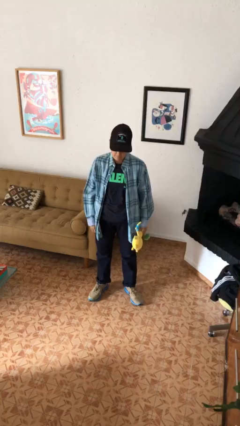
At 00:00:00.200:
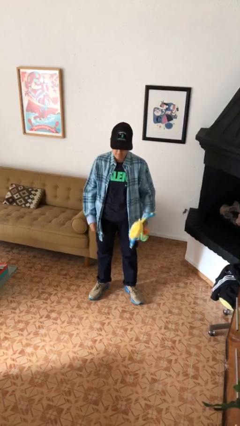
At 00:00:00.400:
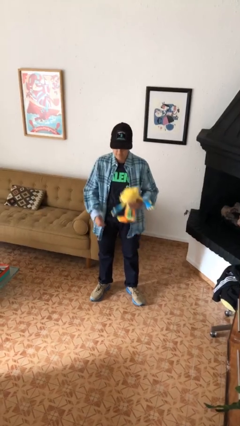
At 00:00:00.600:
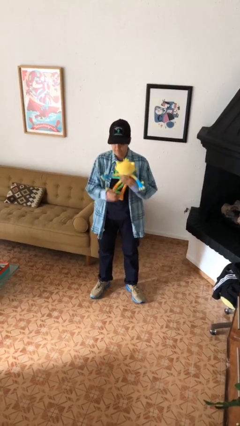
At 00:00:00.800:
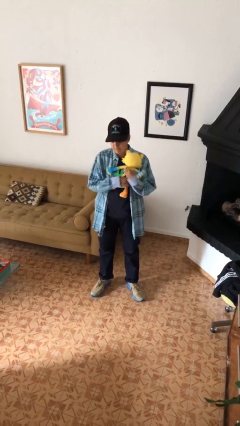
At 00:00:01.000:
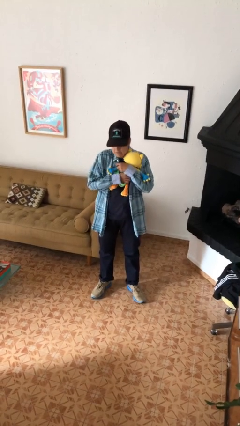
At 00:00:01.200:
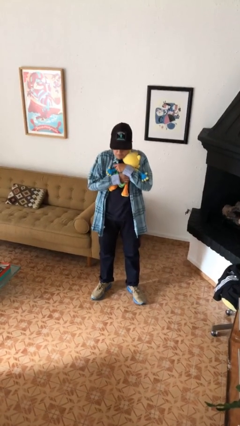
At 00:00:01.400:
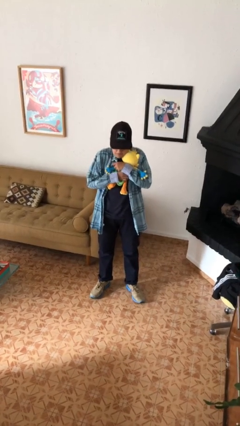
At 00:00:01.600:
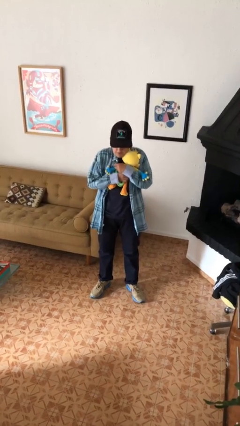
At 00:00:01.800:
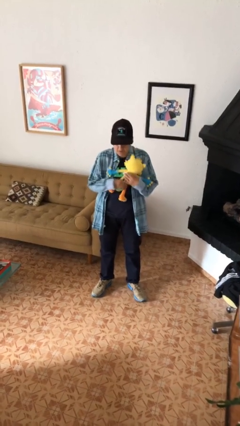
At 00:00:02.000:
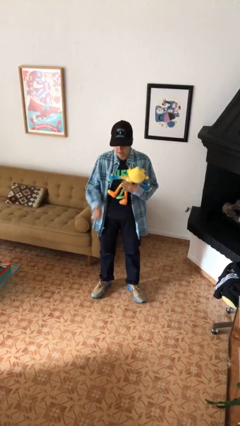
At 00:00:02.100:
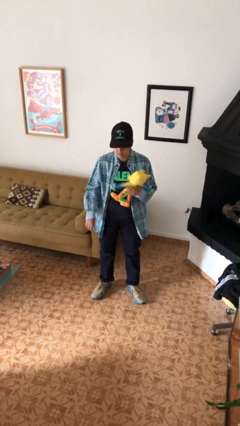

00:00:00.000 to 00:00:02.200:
person hugs stuffed animal

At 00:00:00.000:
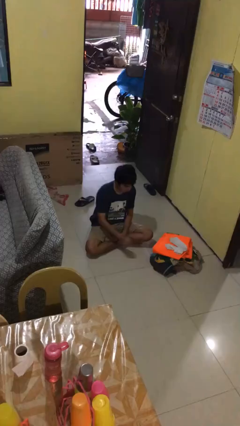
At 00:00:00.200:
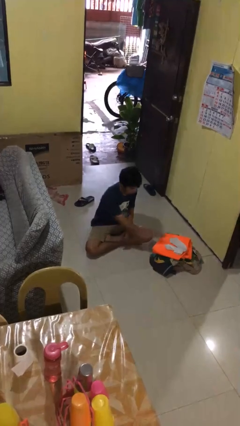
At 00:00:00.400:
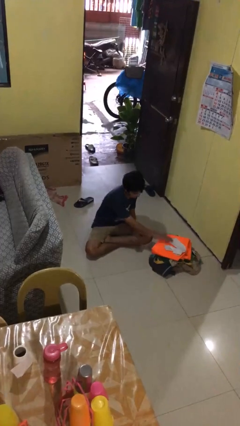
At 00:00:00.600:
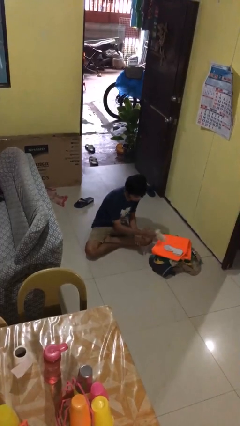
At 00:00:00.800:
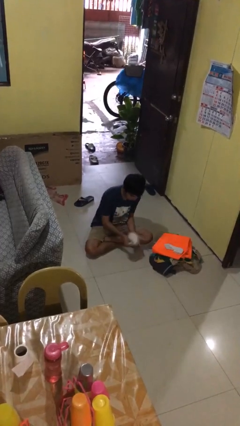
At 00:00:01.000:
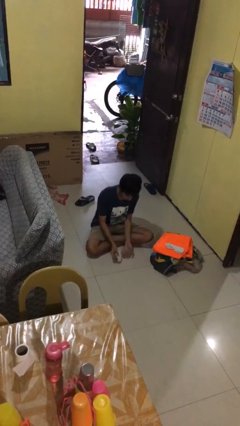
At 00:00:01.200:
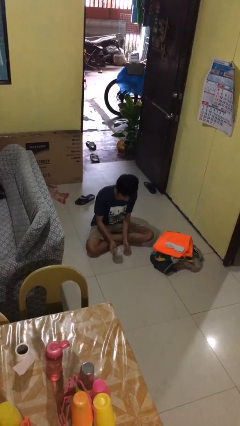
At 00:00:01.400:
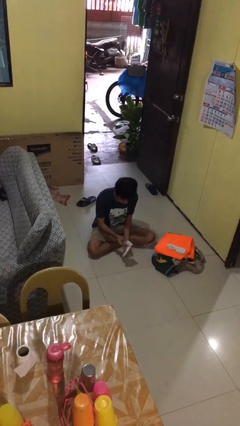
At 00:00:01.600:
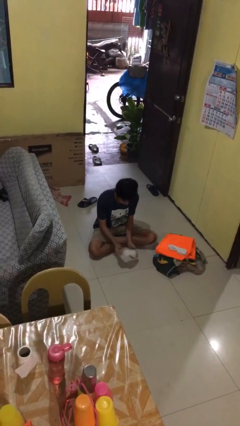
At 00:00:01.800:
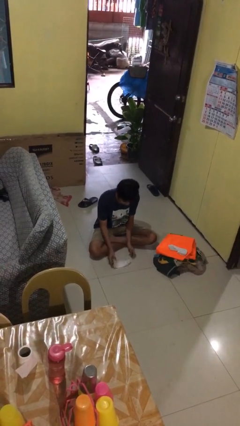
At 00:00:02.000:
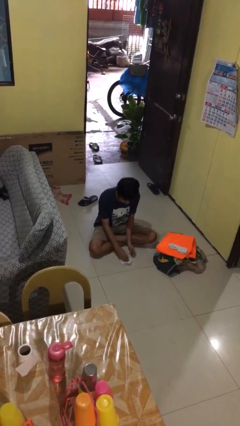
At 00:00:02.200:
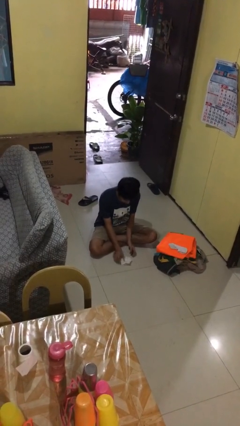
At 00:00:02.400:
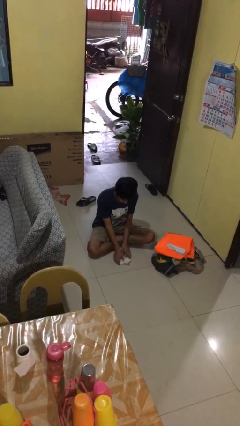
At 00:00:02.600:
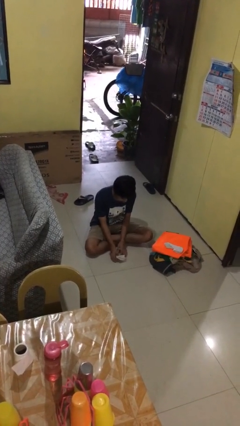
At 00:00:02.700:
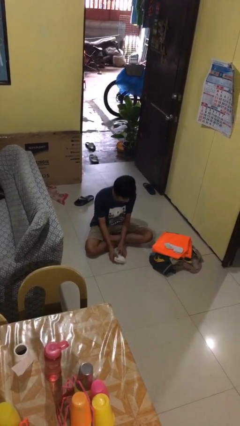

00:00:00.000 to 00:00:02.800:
person folds socks

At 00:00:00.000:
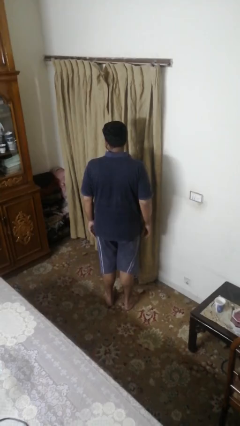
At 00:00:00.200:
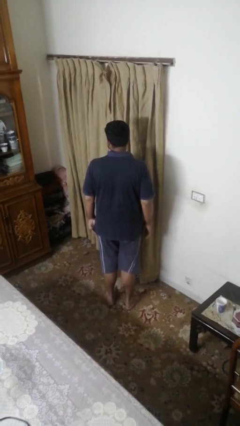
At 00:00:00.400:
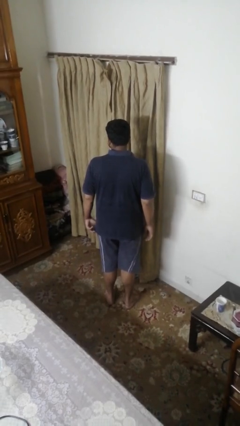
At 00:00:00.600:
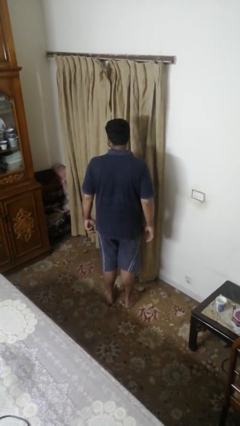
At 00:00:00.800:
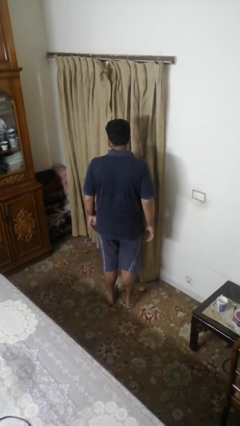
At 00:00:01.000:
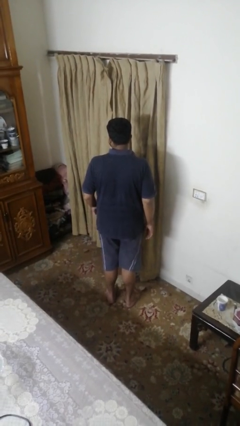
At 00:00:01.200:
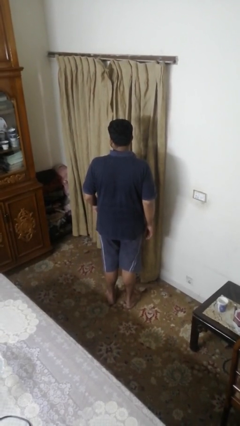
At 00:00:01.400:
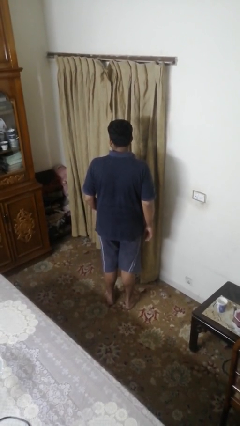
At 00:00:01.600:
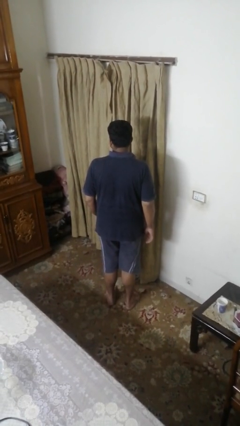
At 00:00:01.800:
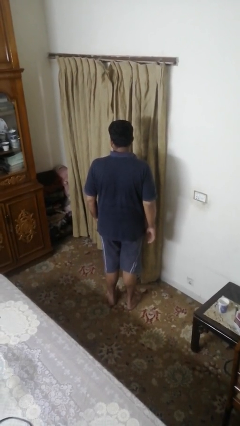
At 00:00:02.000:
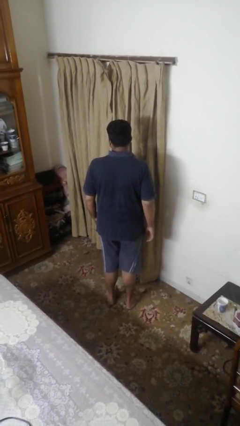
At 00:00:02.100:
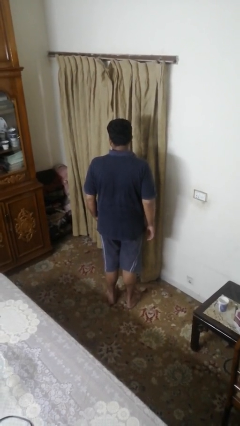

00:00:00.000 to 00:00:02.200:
person gestures listen closely

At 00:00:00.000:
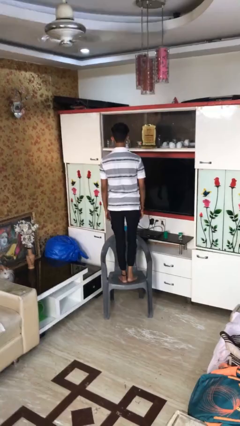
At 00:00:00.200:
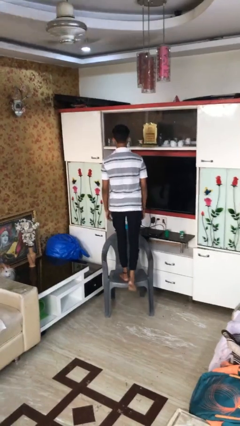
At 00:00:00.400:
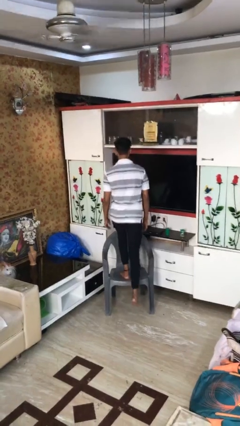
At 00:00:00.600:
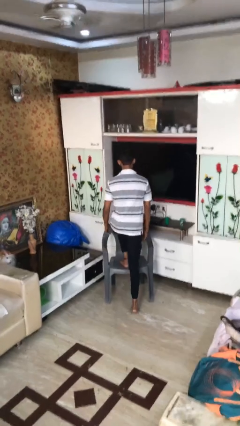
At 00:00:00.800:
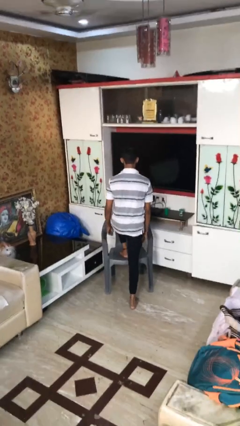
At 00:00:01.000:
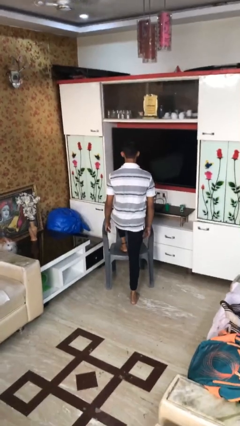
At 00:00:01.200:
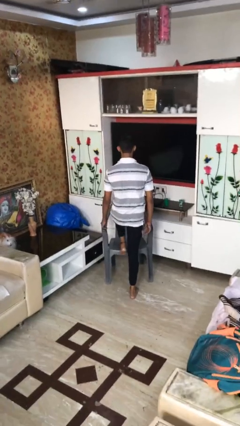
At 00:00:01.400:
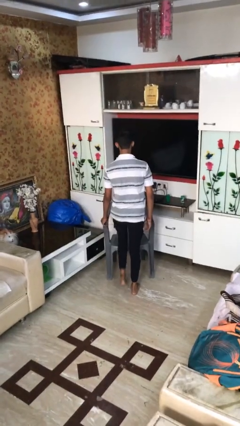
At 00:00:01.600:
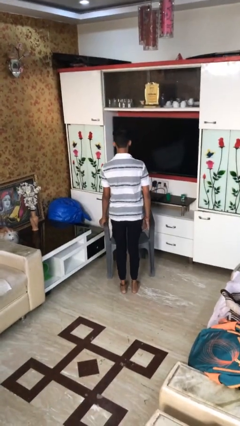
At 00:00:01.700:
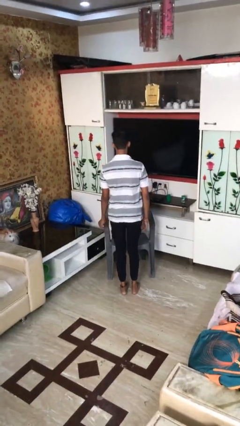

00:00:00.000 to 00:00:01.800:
person climbs off chair

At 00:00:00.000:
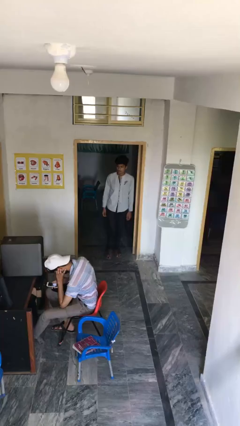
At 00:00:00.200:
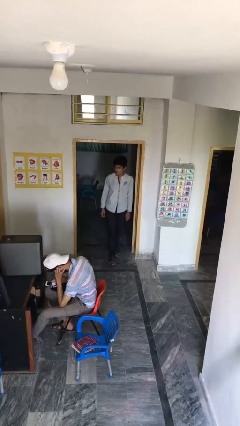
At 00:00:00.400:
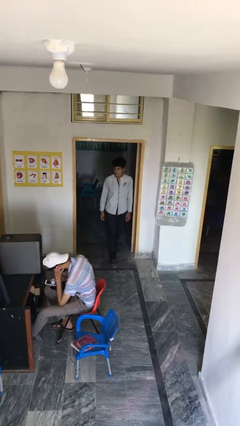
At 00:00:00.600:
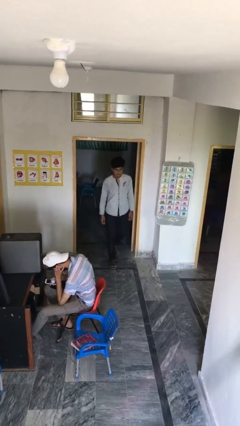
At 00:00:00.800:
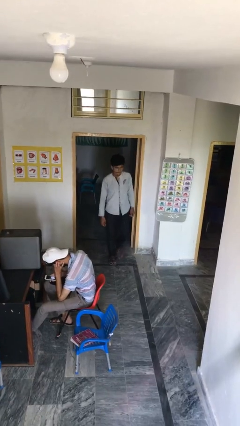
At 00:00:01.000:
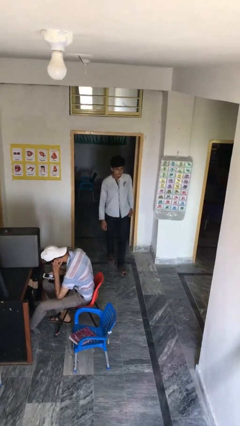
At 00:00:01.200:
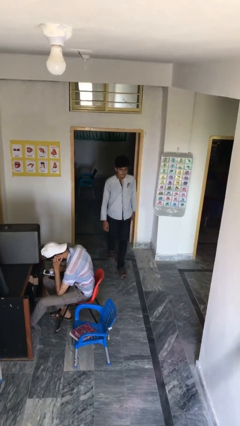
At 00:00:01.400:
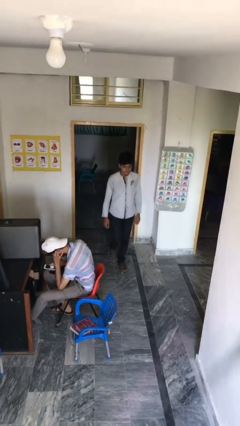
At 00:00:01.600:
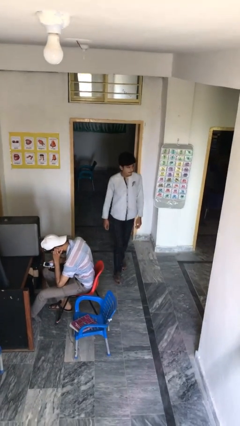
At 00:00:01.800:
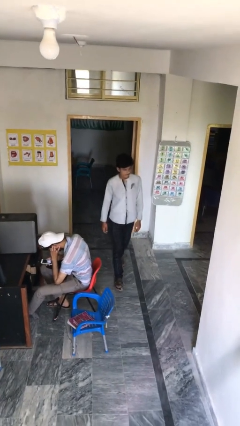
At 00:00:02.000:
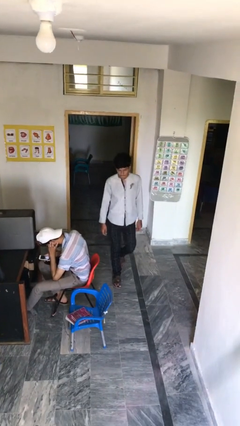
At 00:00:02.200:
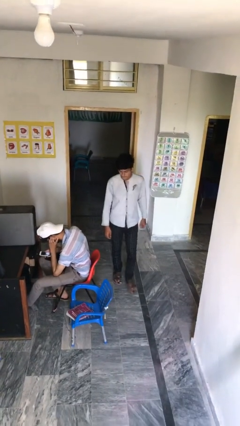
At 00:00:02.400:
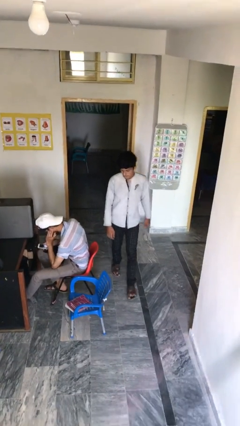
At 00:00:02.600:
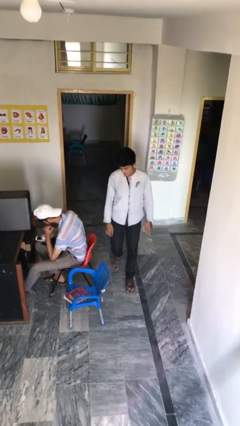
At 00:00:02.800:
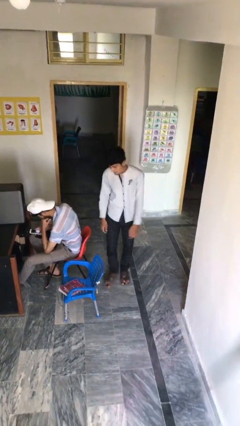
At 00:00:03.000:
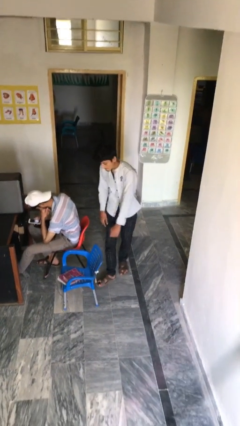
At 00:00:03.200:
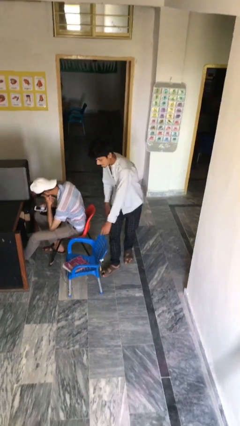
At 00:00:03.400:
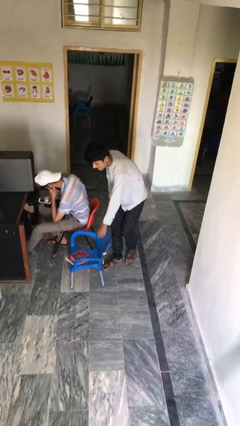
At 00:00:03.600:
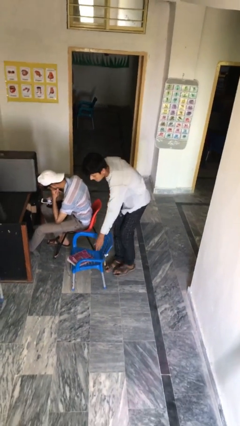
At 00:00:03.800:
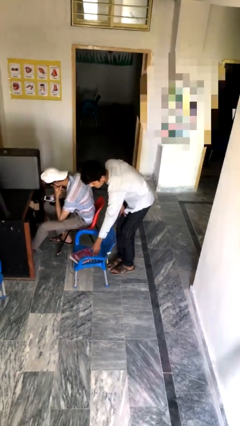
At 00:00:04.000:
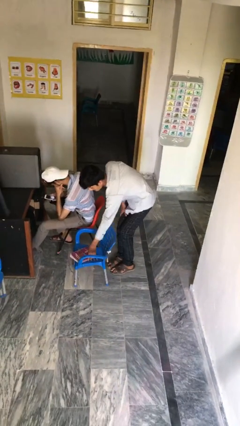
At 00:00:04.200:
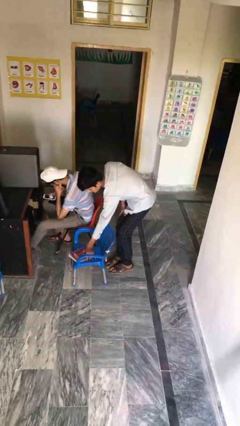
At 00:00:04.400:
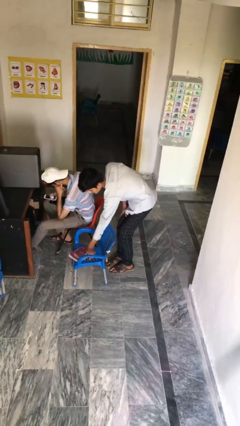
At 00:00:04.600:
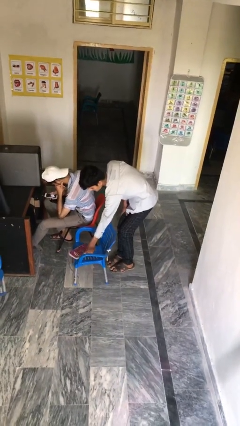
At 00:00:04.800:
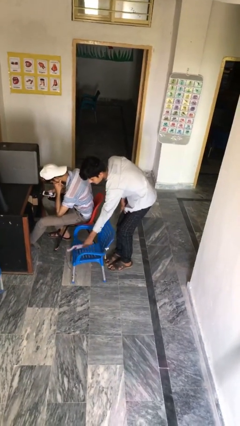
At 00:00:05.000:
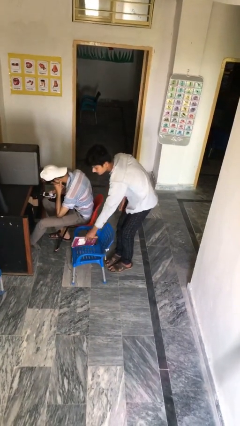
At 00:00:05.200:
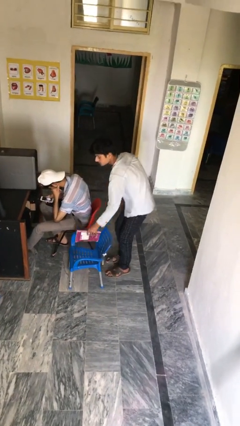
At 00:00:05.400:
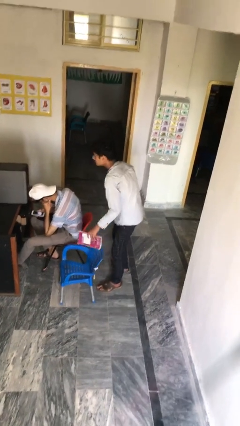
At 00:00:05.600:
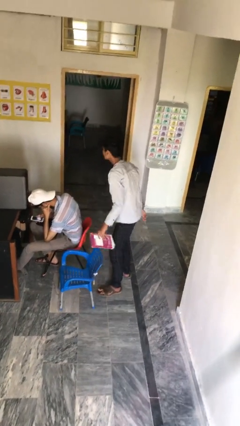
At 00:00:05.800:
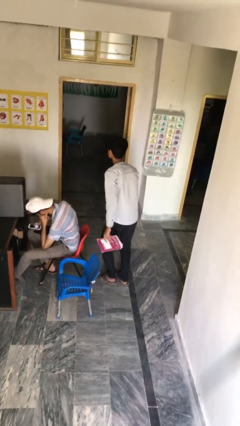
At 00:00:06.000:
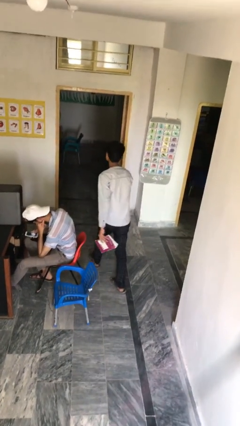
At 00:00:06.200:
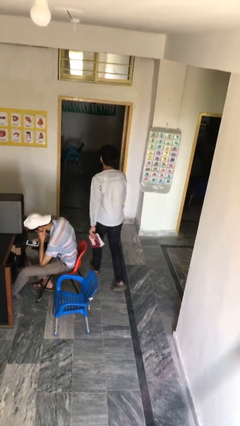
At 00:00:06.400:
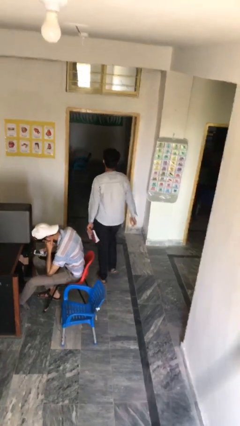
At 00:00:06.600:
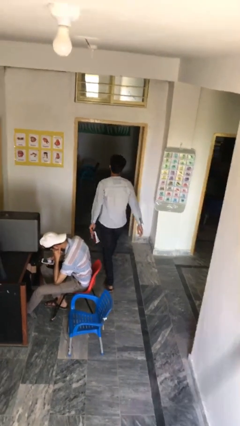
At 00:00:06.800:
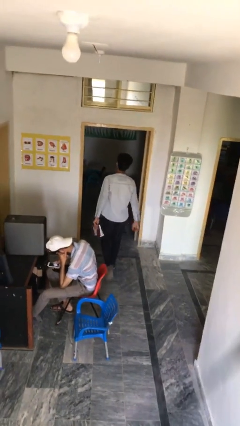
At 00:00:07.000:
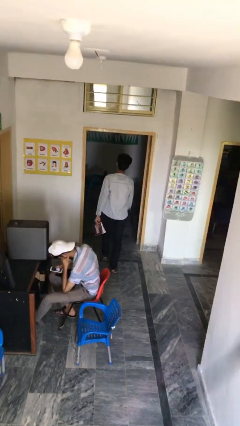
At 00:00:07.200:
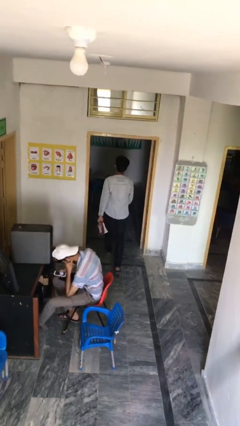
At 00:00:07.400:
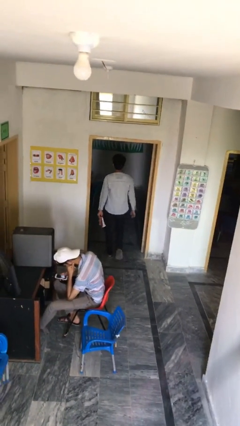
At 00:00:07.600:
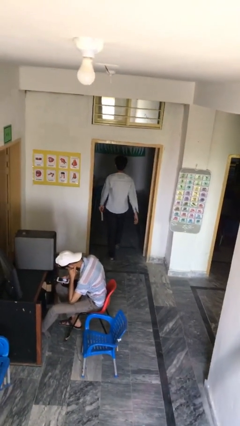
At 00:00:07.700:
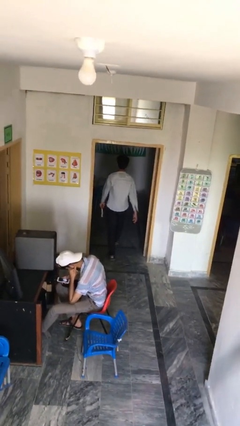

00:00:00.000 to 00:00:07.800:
person steals object from person

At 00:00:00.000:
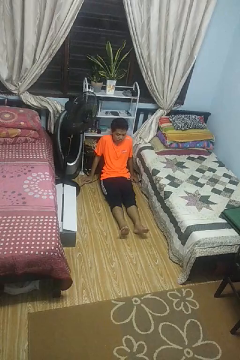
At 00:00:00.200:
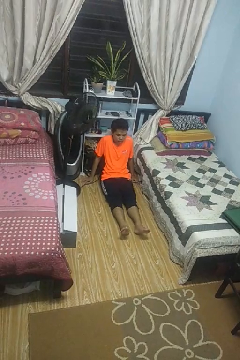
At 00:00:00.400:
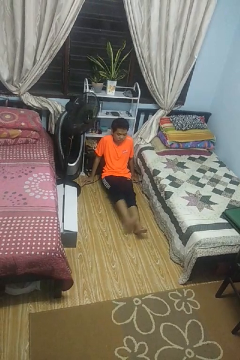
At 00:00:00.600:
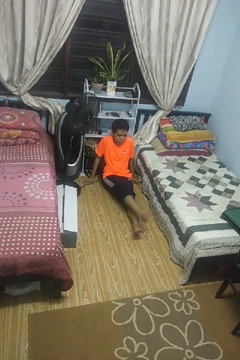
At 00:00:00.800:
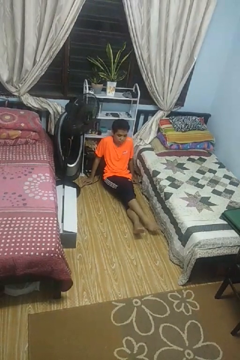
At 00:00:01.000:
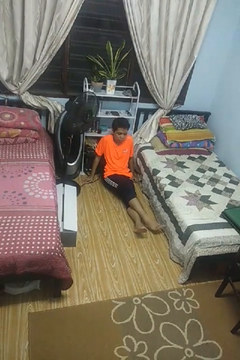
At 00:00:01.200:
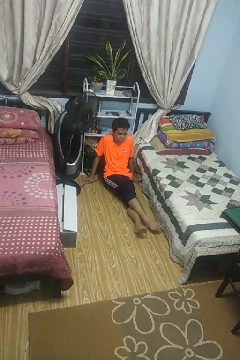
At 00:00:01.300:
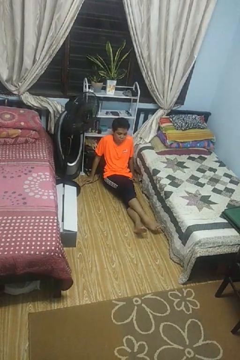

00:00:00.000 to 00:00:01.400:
person crosses legs
